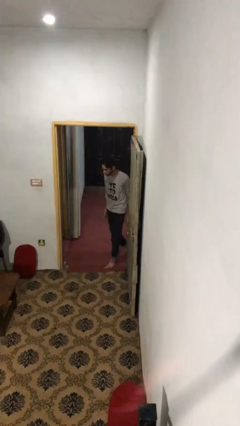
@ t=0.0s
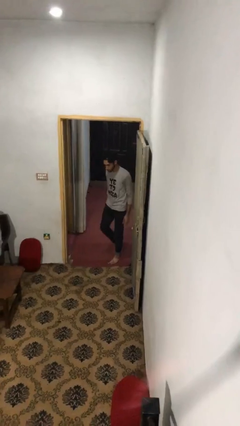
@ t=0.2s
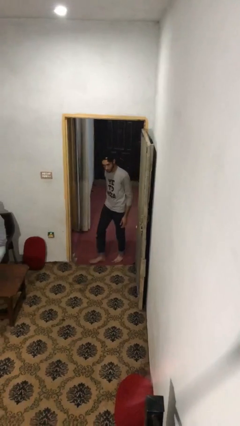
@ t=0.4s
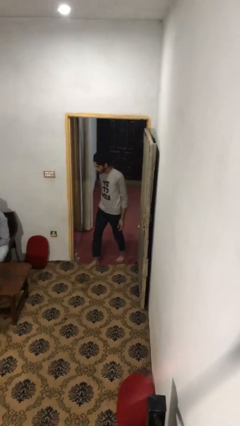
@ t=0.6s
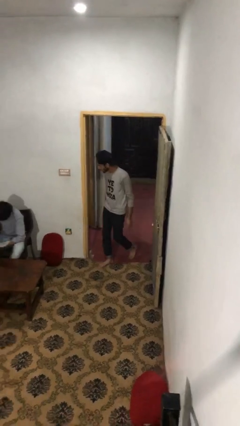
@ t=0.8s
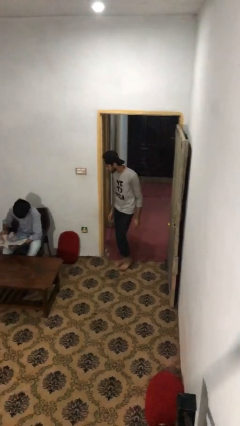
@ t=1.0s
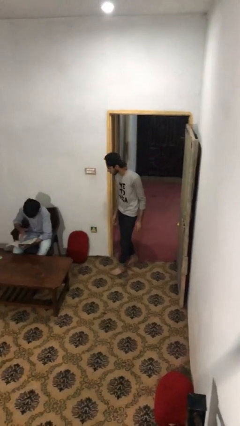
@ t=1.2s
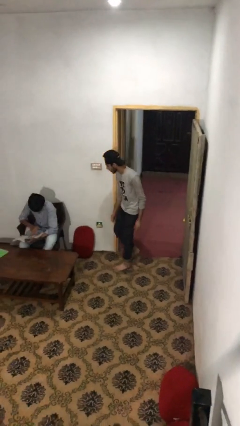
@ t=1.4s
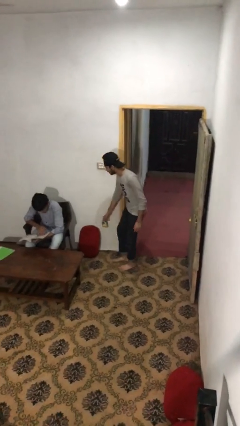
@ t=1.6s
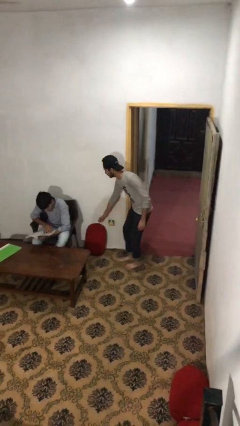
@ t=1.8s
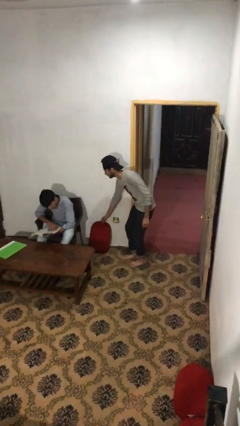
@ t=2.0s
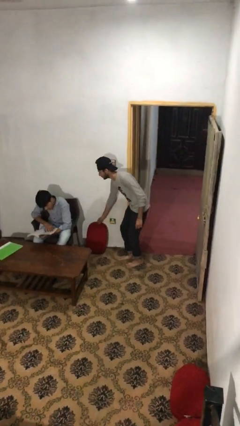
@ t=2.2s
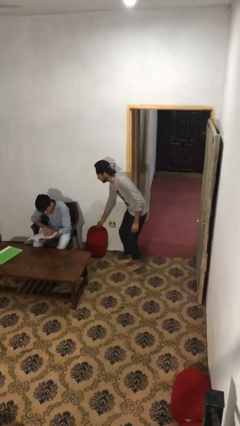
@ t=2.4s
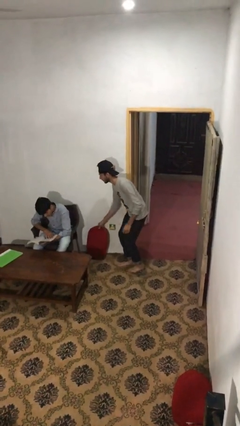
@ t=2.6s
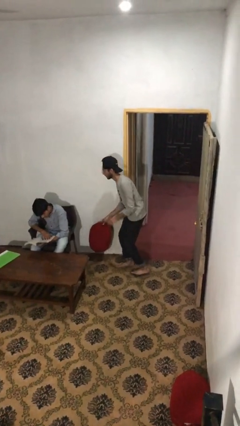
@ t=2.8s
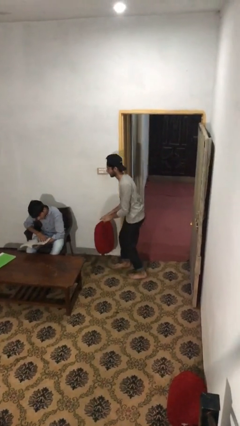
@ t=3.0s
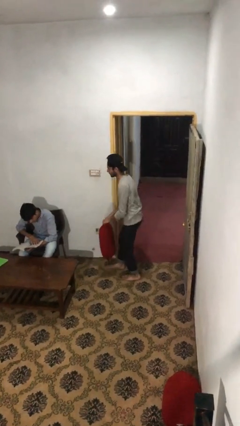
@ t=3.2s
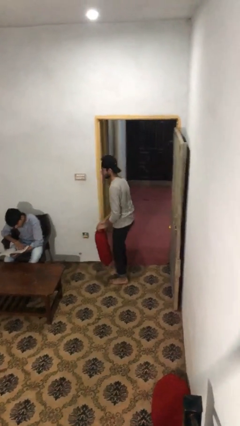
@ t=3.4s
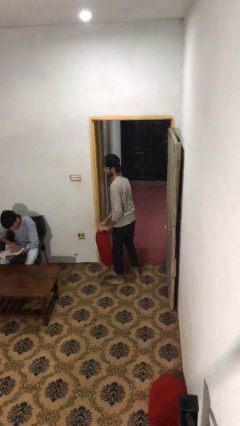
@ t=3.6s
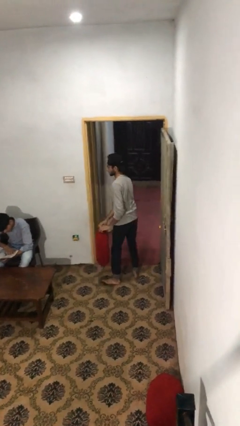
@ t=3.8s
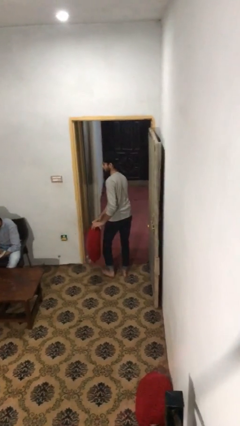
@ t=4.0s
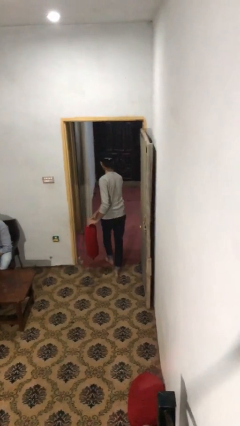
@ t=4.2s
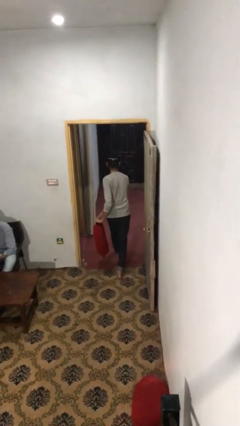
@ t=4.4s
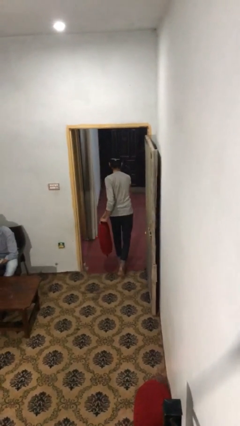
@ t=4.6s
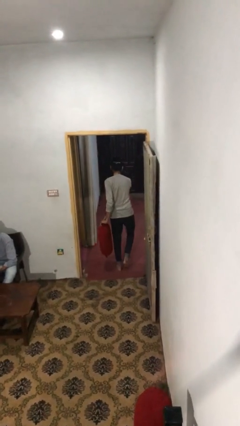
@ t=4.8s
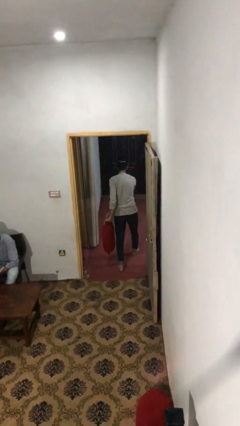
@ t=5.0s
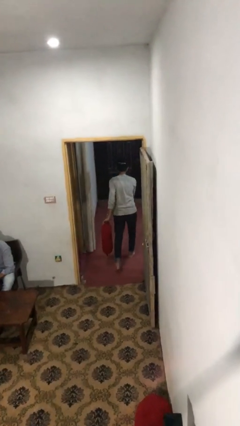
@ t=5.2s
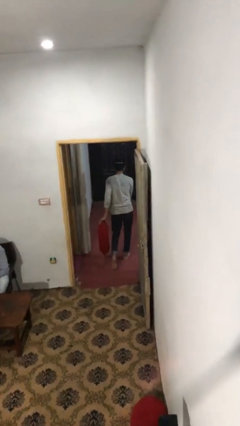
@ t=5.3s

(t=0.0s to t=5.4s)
person steals object from person

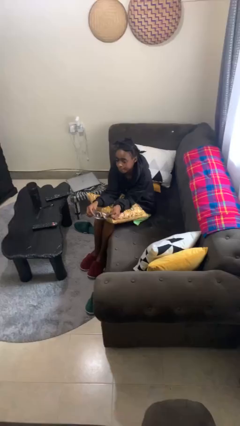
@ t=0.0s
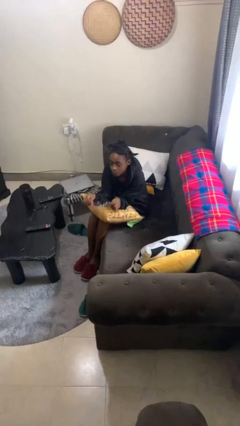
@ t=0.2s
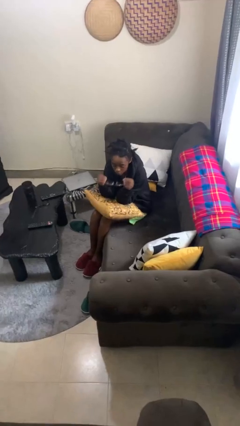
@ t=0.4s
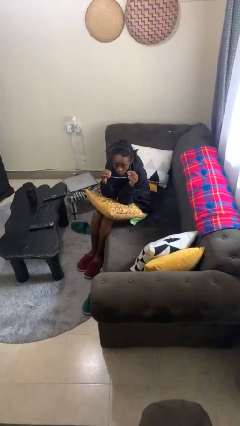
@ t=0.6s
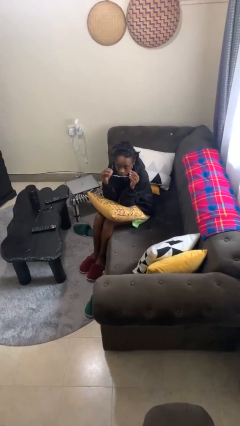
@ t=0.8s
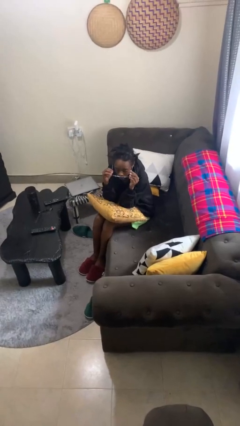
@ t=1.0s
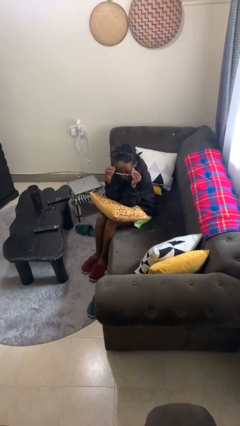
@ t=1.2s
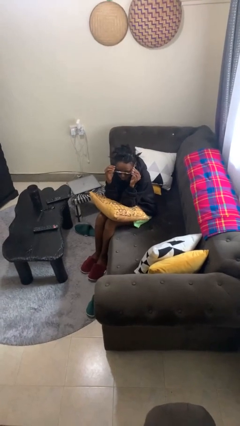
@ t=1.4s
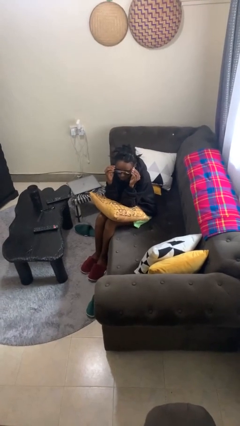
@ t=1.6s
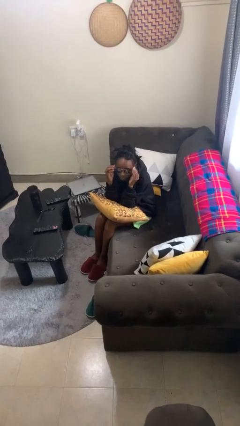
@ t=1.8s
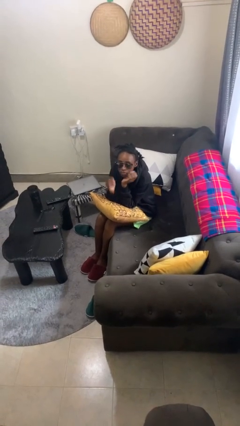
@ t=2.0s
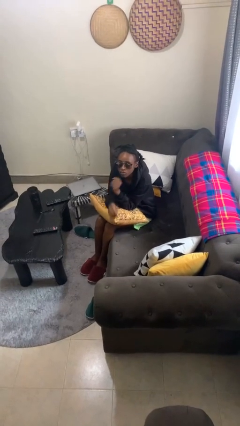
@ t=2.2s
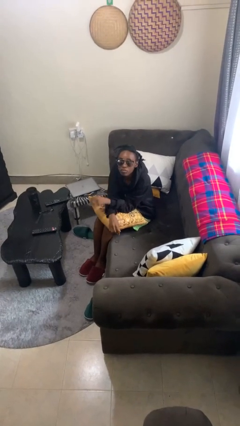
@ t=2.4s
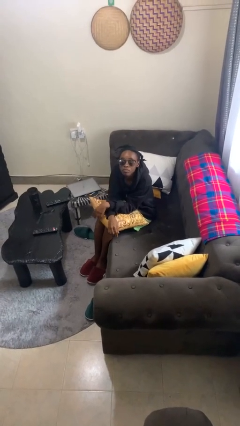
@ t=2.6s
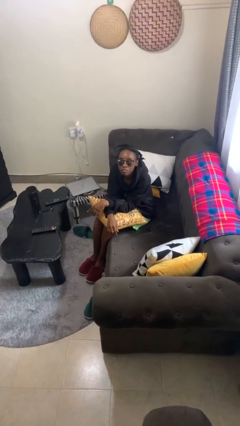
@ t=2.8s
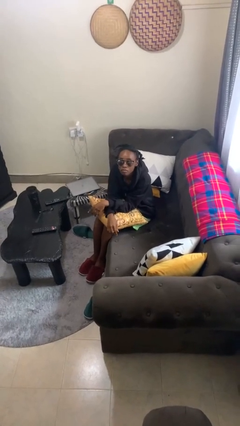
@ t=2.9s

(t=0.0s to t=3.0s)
person puts on sunglasses

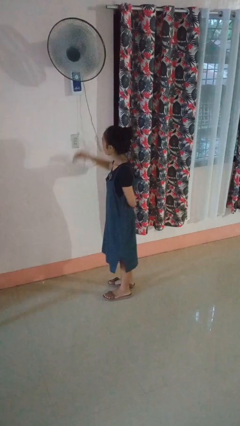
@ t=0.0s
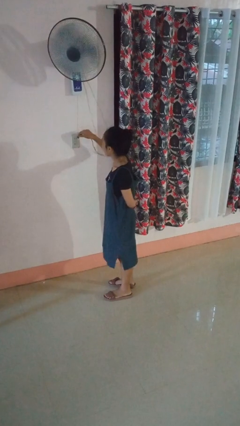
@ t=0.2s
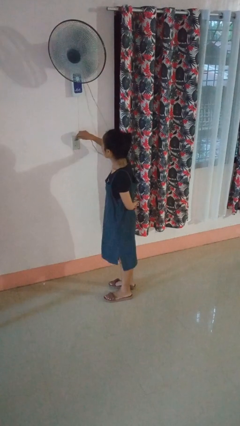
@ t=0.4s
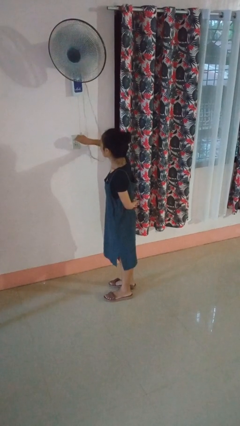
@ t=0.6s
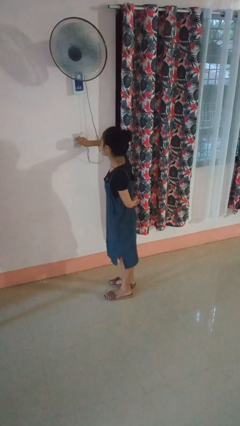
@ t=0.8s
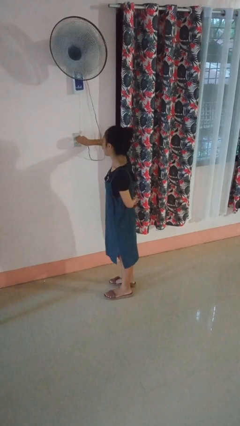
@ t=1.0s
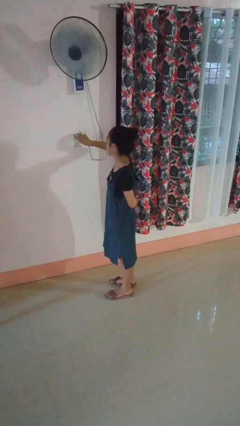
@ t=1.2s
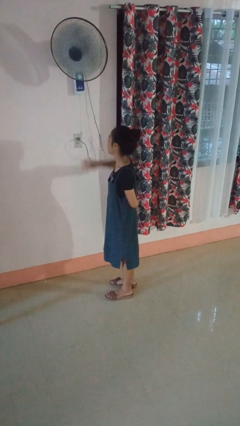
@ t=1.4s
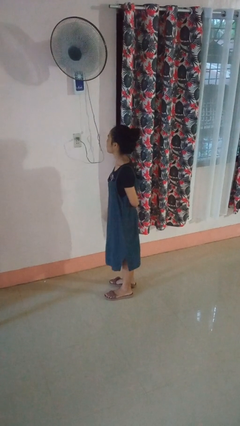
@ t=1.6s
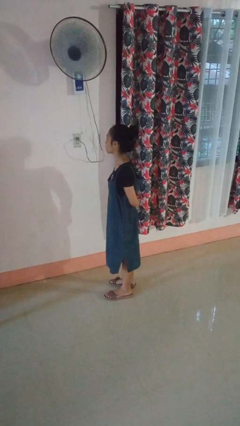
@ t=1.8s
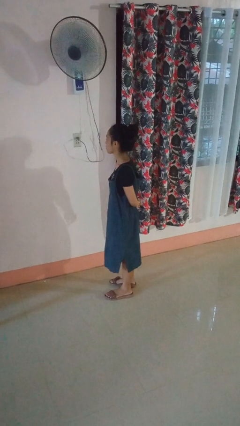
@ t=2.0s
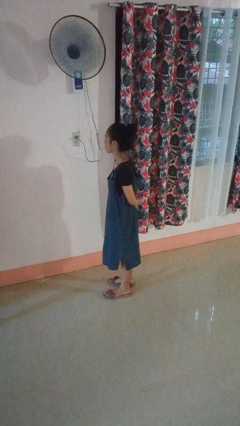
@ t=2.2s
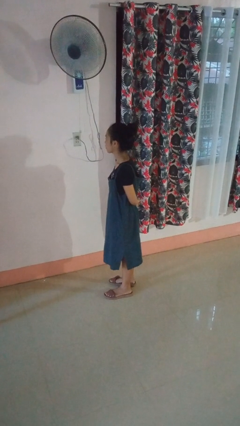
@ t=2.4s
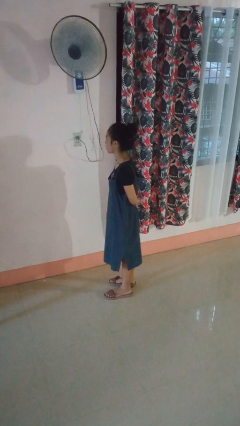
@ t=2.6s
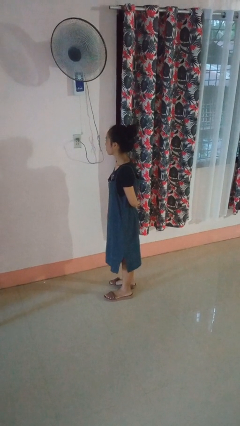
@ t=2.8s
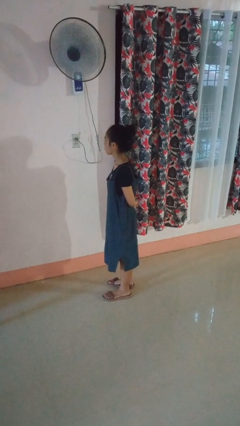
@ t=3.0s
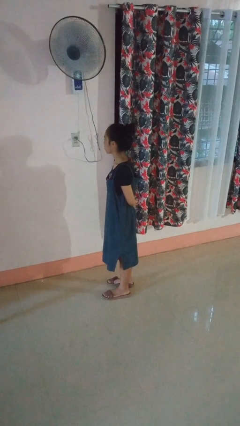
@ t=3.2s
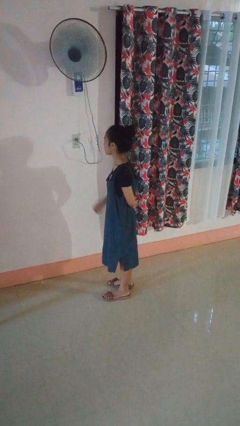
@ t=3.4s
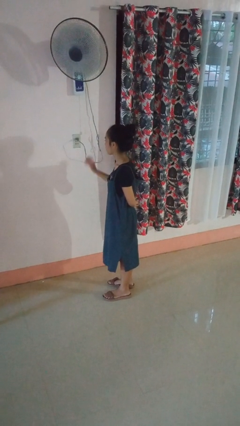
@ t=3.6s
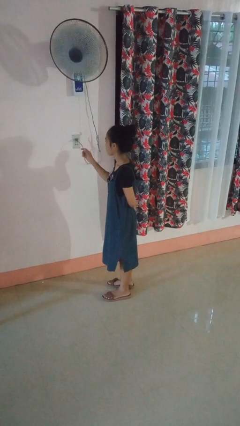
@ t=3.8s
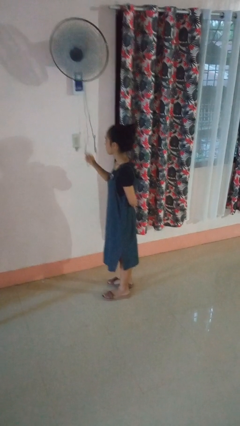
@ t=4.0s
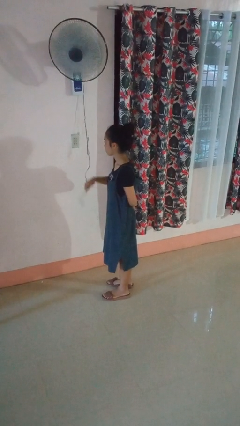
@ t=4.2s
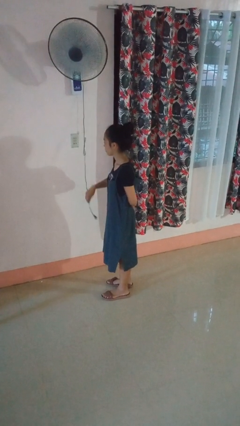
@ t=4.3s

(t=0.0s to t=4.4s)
person plugs into electrical socket

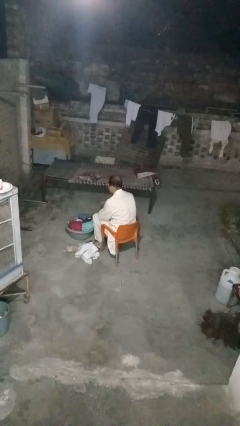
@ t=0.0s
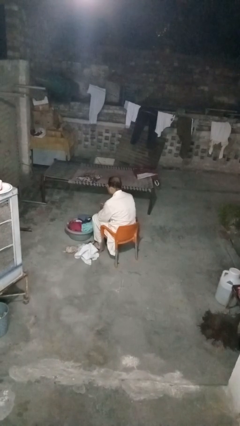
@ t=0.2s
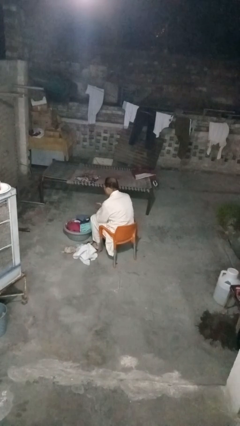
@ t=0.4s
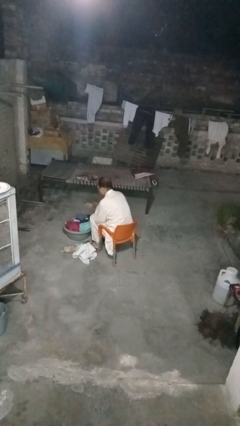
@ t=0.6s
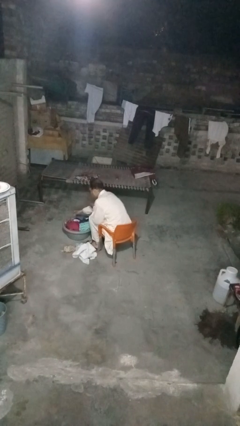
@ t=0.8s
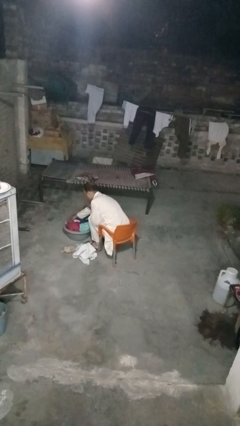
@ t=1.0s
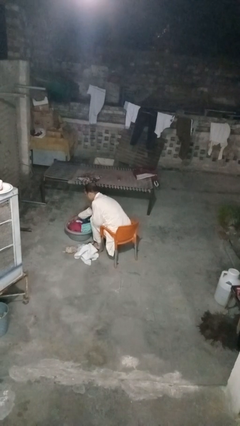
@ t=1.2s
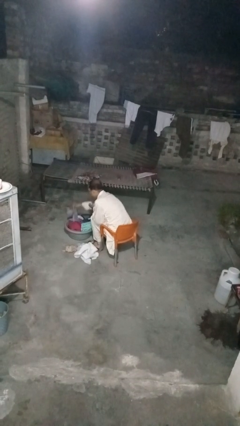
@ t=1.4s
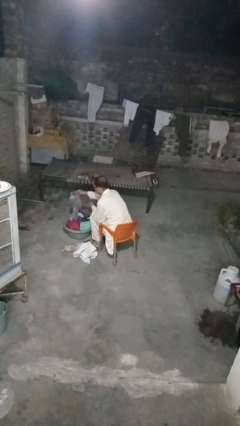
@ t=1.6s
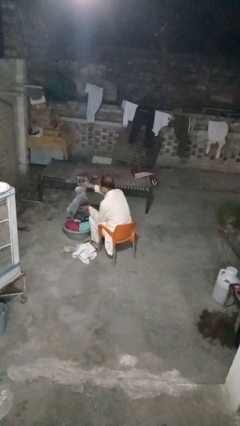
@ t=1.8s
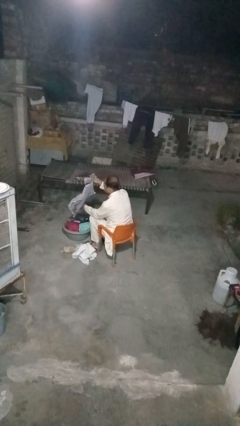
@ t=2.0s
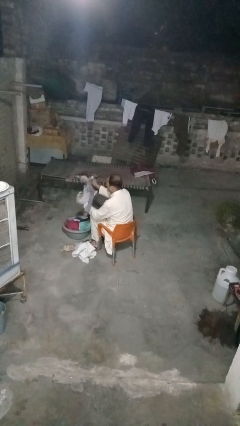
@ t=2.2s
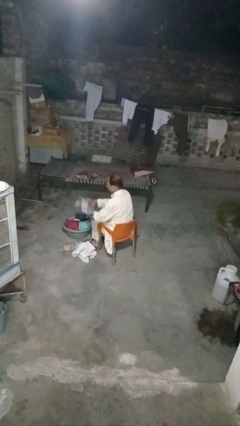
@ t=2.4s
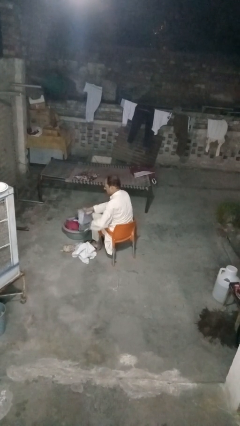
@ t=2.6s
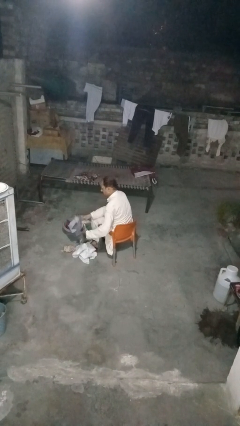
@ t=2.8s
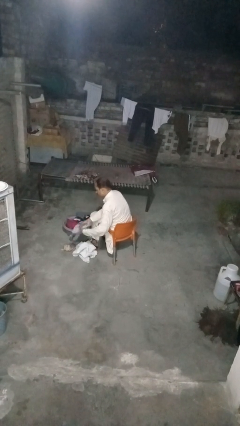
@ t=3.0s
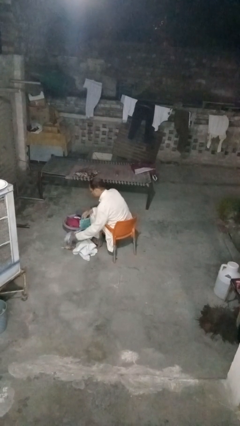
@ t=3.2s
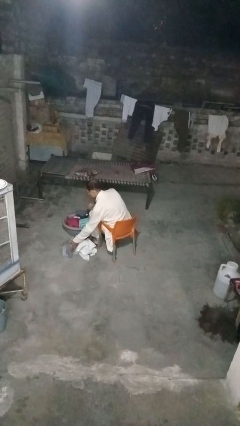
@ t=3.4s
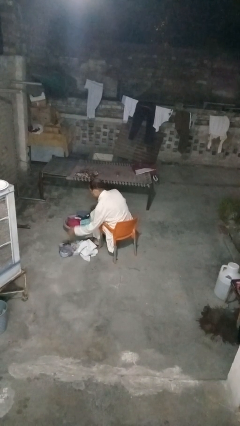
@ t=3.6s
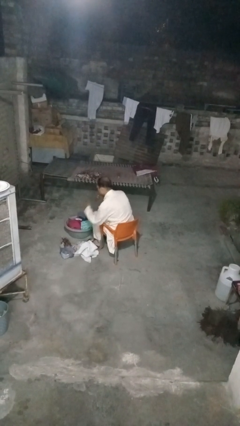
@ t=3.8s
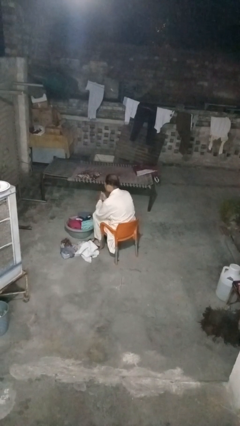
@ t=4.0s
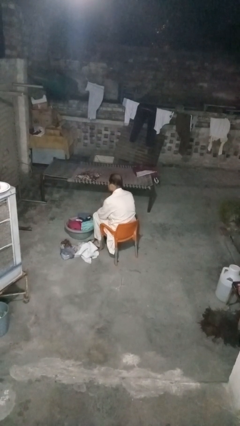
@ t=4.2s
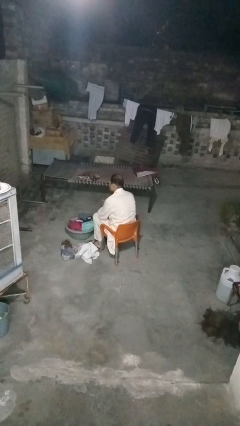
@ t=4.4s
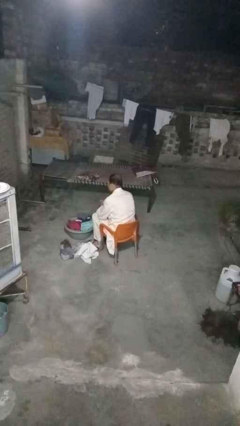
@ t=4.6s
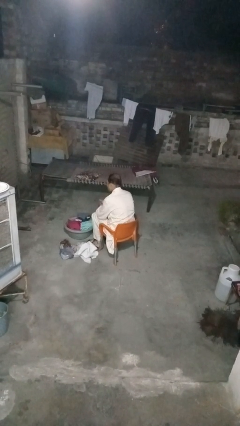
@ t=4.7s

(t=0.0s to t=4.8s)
person takes object from basket
